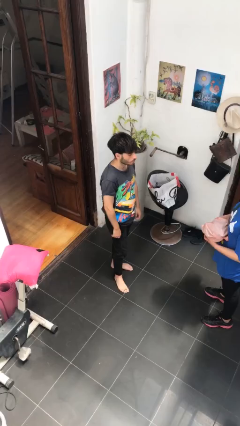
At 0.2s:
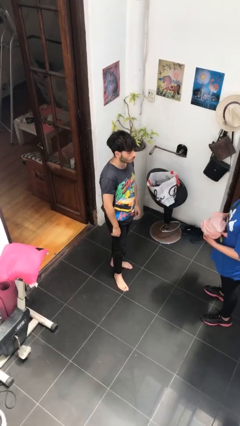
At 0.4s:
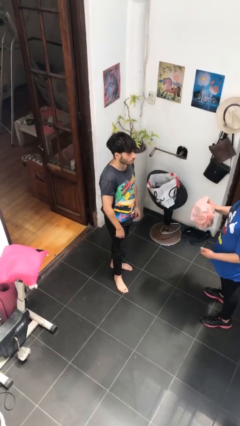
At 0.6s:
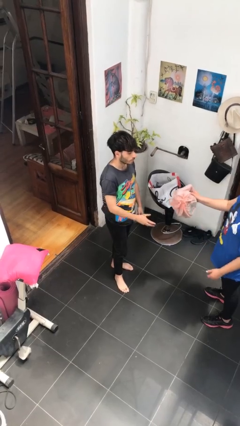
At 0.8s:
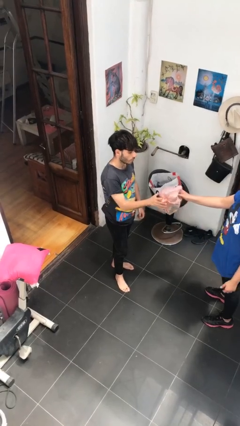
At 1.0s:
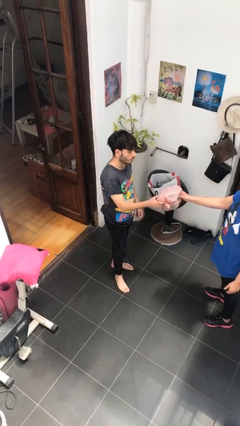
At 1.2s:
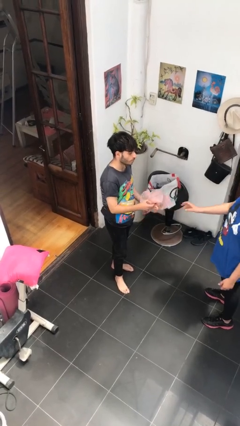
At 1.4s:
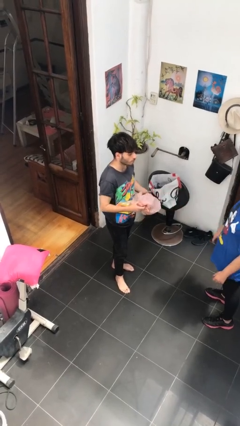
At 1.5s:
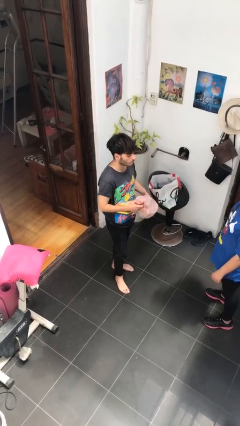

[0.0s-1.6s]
person transfers object to person

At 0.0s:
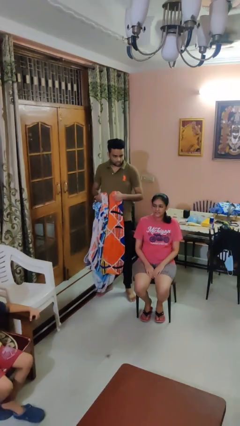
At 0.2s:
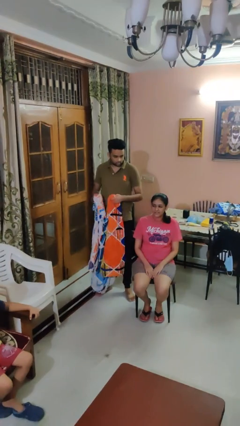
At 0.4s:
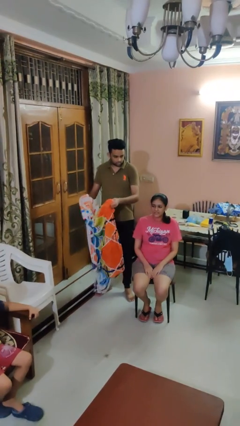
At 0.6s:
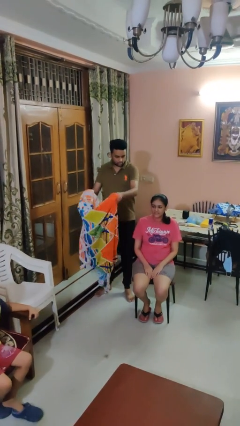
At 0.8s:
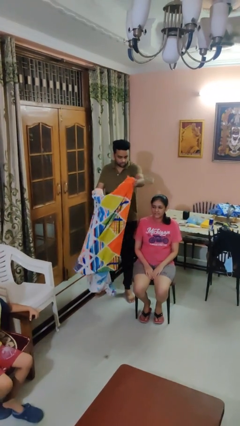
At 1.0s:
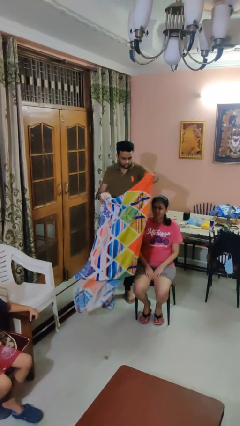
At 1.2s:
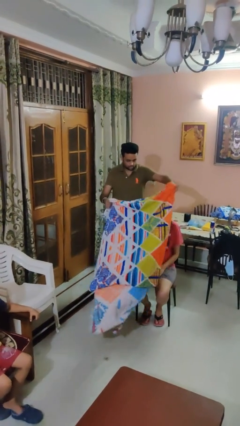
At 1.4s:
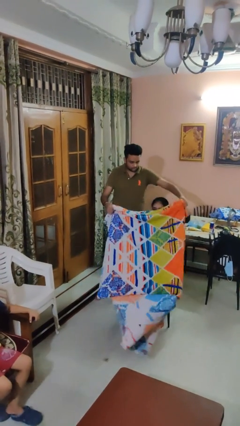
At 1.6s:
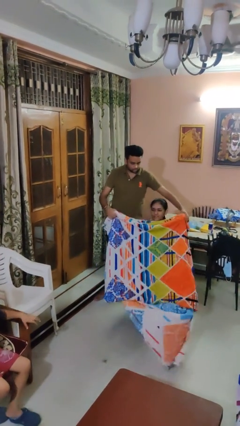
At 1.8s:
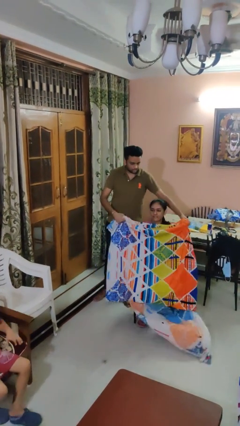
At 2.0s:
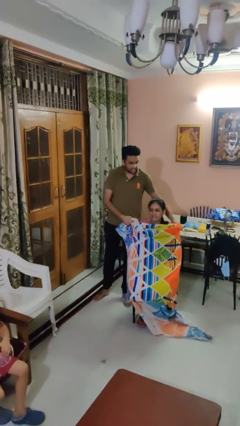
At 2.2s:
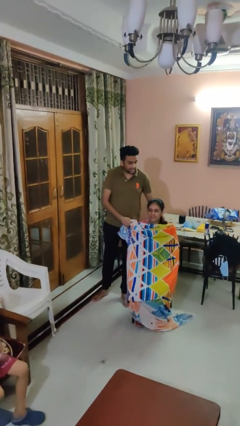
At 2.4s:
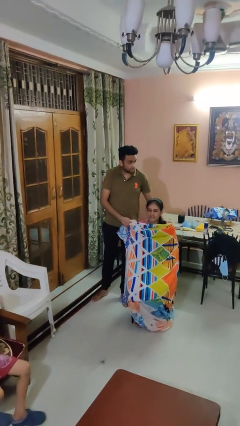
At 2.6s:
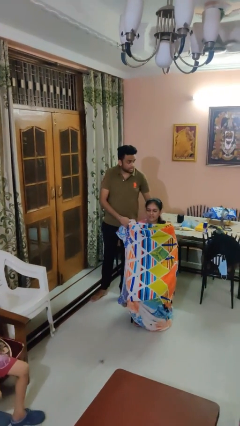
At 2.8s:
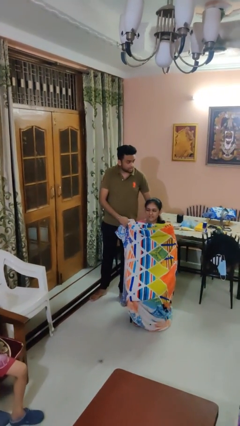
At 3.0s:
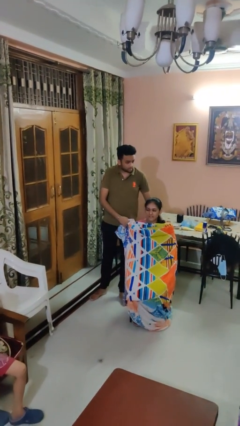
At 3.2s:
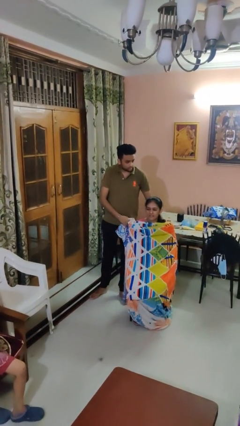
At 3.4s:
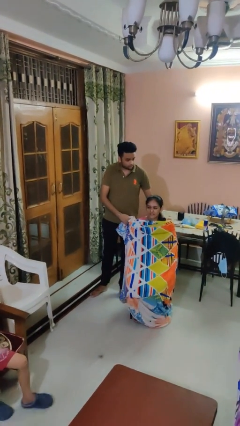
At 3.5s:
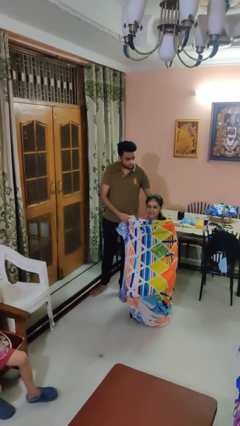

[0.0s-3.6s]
person covers friend with blanket

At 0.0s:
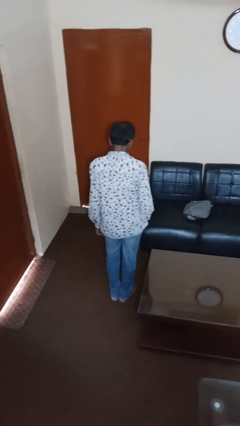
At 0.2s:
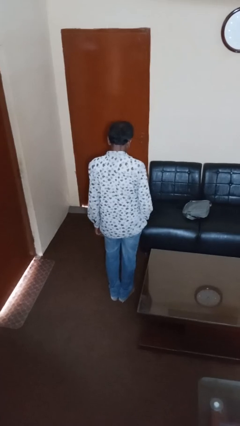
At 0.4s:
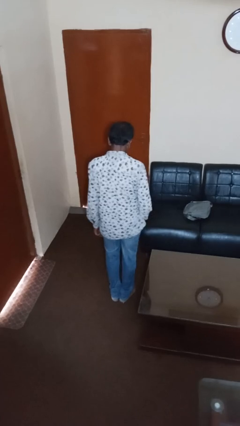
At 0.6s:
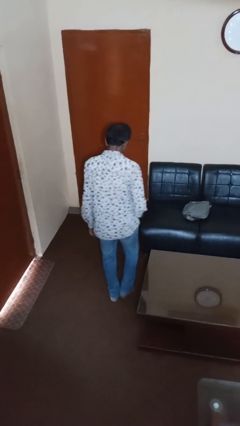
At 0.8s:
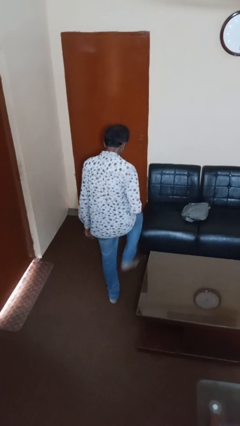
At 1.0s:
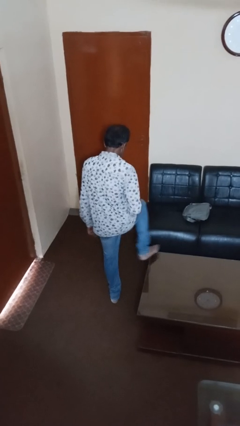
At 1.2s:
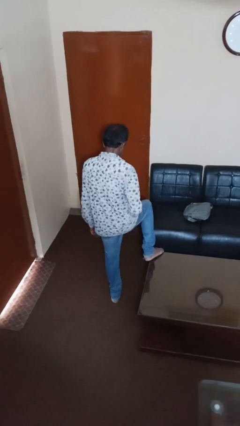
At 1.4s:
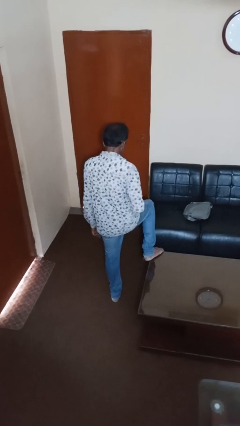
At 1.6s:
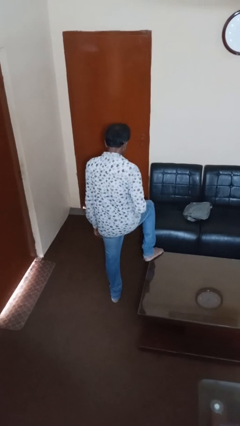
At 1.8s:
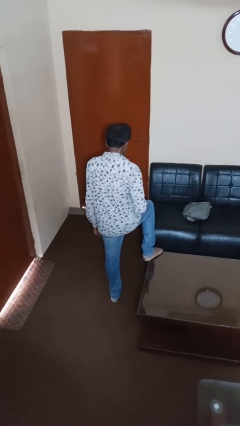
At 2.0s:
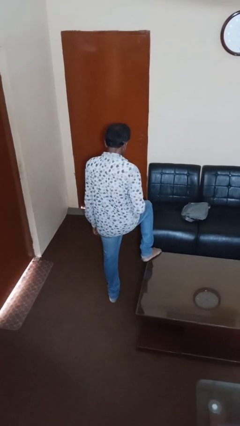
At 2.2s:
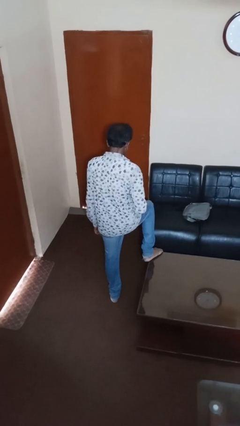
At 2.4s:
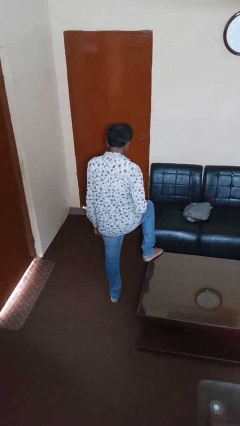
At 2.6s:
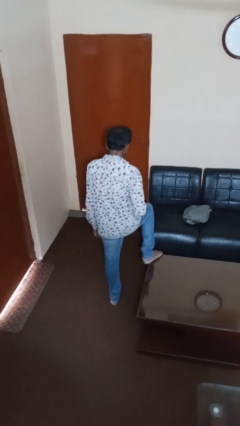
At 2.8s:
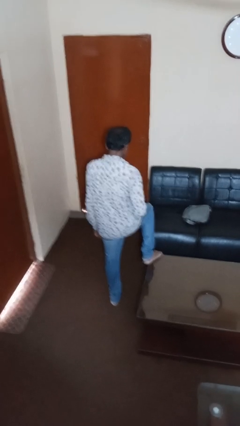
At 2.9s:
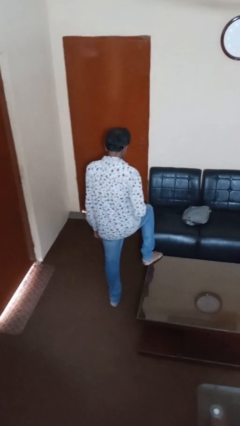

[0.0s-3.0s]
person puts feet up

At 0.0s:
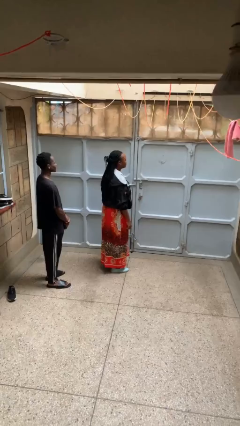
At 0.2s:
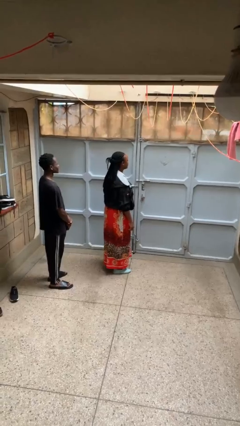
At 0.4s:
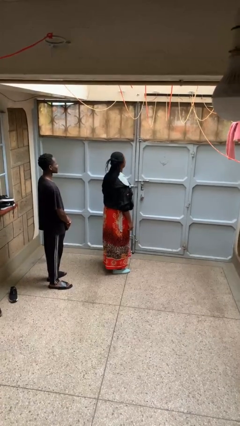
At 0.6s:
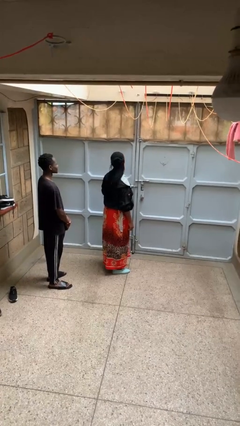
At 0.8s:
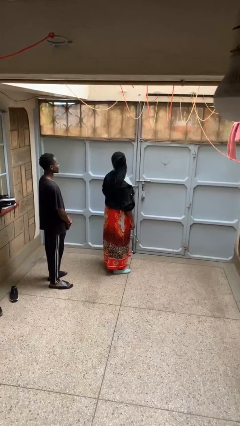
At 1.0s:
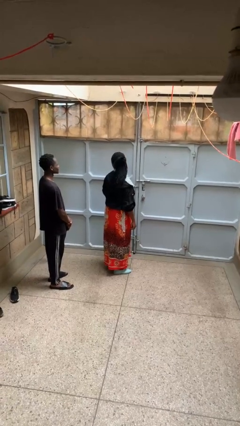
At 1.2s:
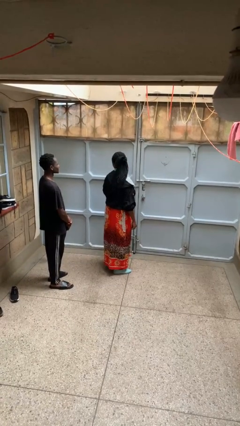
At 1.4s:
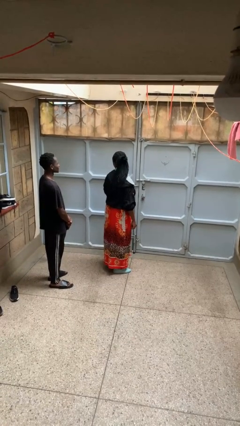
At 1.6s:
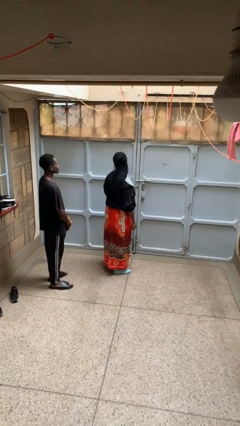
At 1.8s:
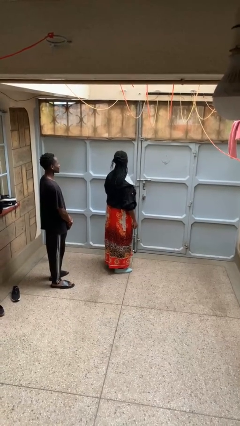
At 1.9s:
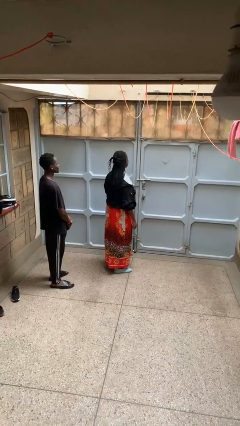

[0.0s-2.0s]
person looks over shoulder

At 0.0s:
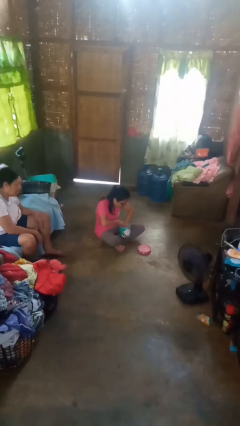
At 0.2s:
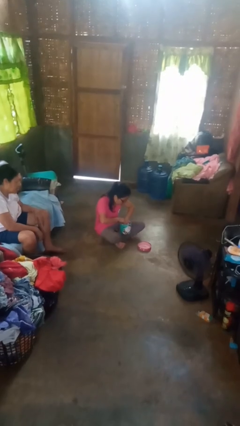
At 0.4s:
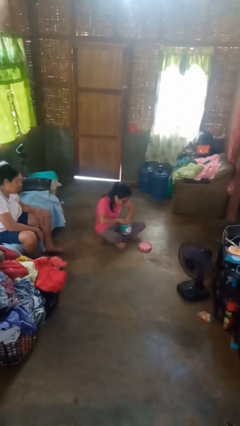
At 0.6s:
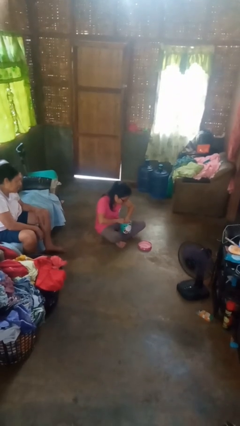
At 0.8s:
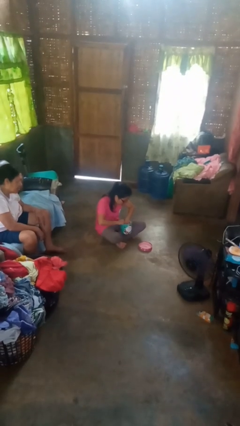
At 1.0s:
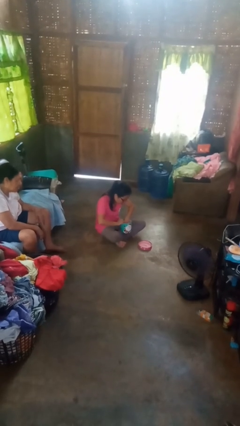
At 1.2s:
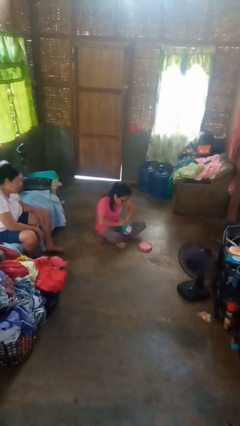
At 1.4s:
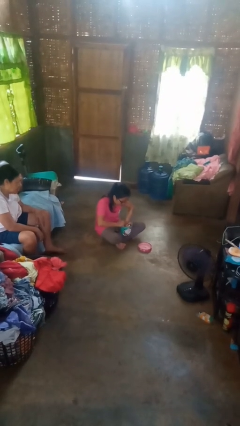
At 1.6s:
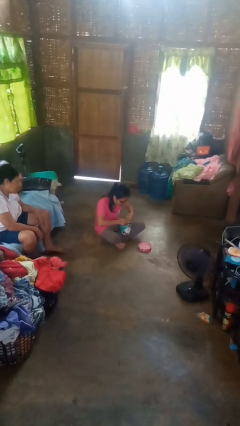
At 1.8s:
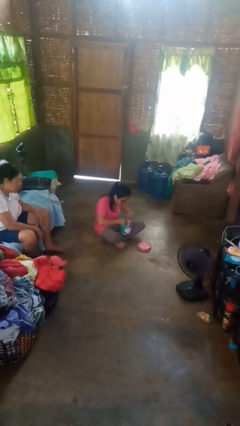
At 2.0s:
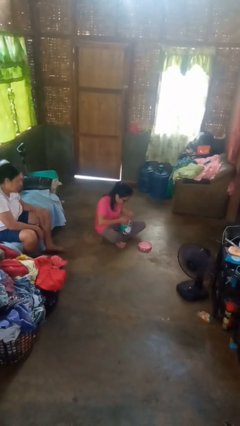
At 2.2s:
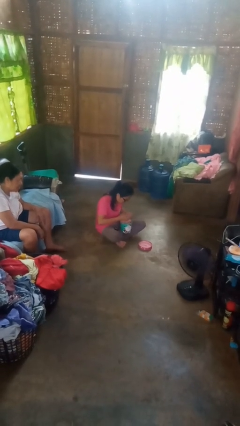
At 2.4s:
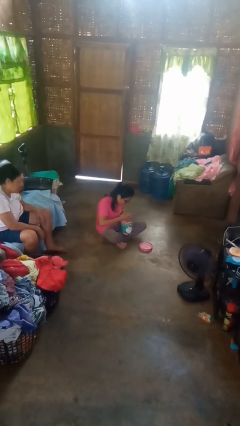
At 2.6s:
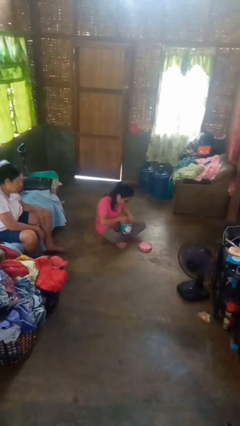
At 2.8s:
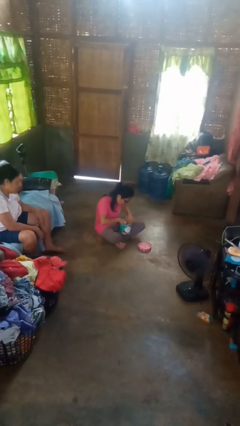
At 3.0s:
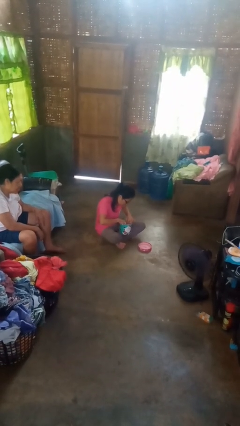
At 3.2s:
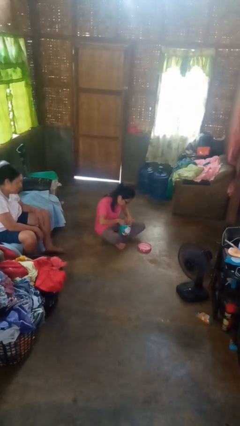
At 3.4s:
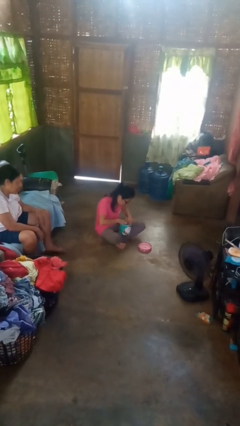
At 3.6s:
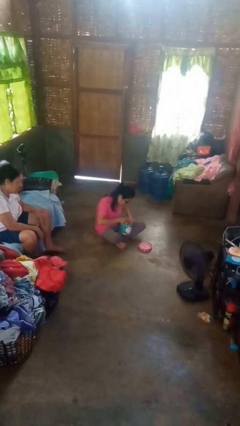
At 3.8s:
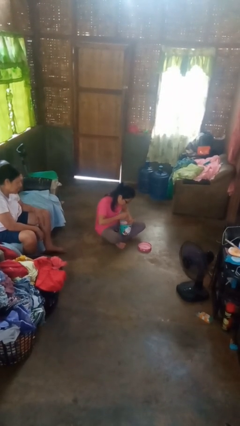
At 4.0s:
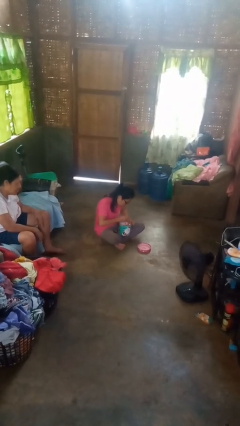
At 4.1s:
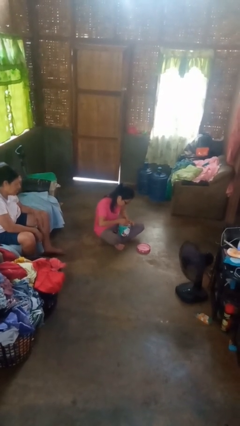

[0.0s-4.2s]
person searches jewelry box

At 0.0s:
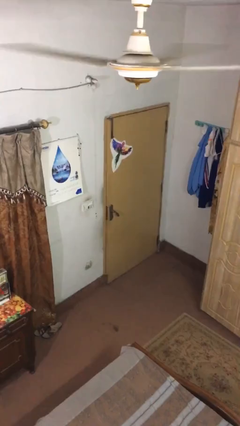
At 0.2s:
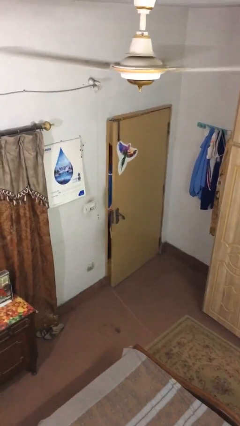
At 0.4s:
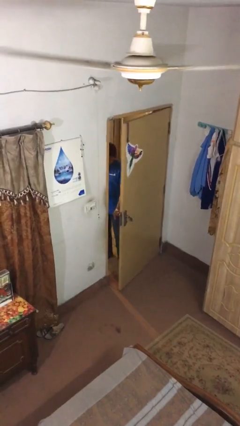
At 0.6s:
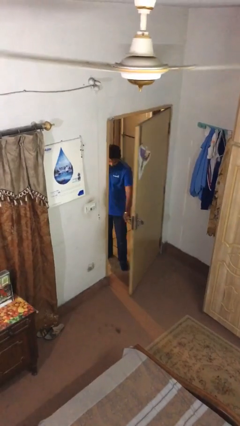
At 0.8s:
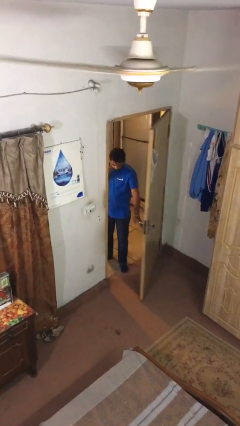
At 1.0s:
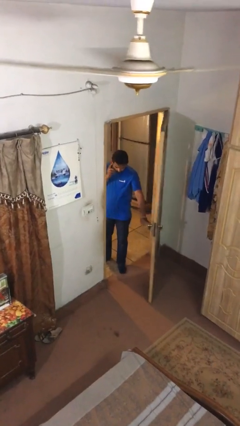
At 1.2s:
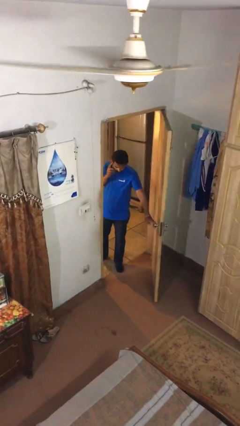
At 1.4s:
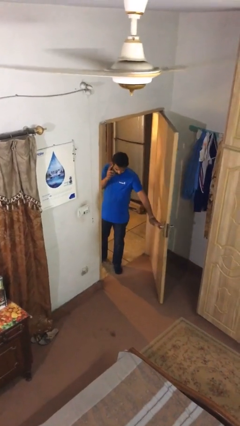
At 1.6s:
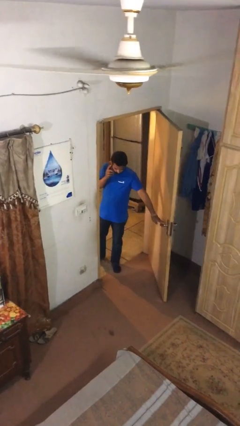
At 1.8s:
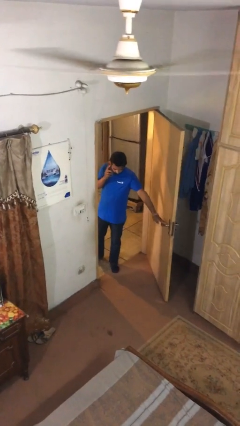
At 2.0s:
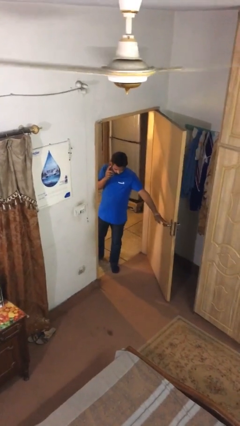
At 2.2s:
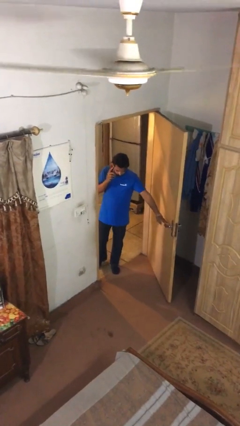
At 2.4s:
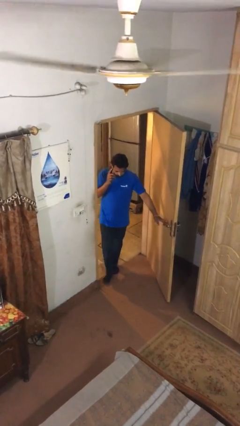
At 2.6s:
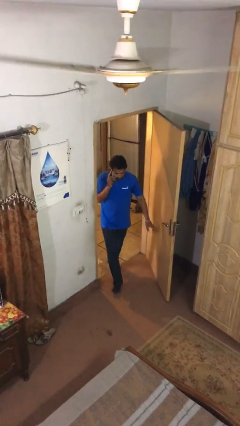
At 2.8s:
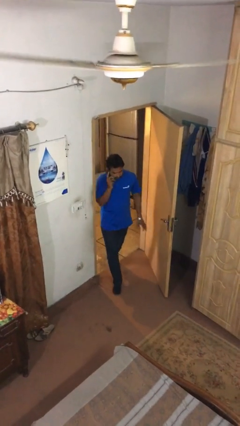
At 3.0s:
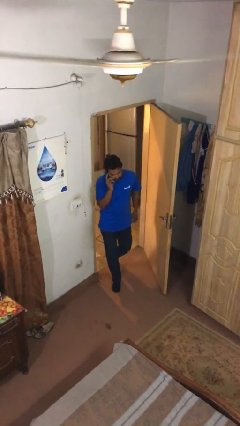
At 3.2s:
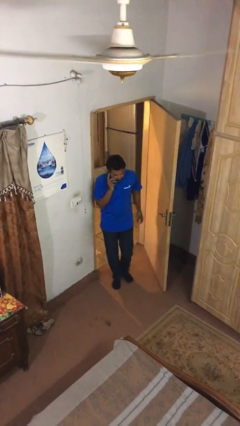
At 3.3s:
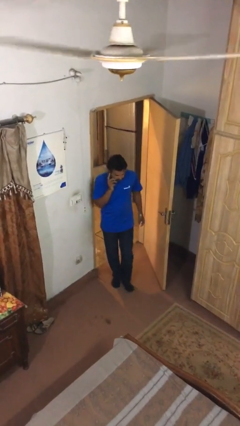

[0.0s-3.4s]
person opens facility door
